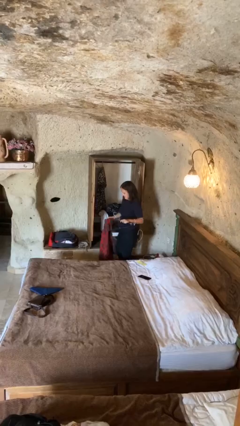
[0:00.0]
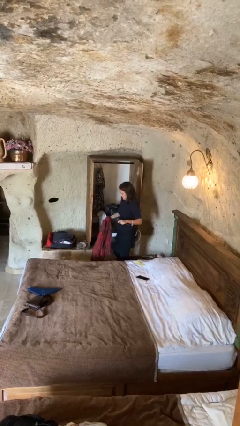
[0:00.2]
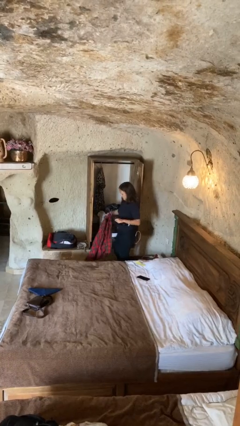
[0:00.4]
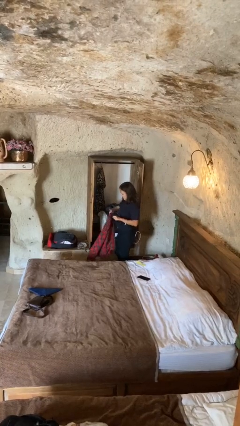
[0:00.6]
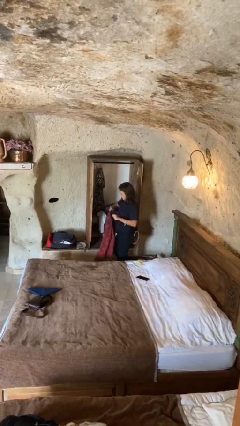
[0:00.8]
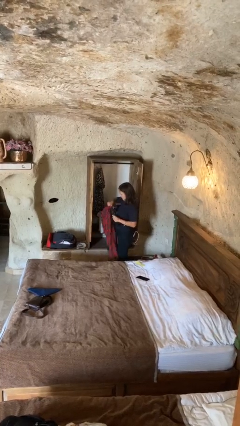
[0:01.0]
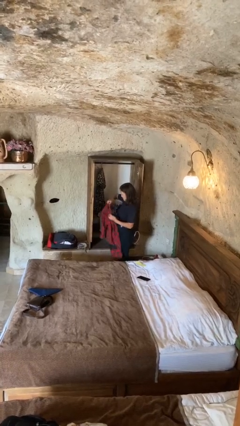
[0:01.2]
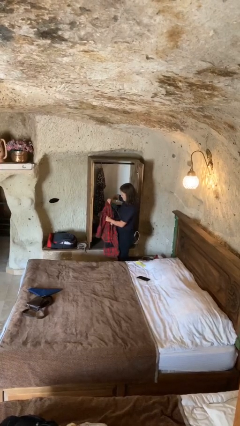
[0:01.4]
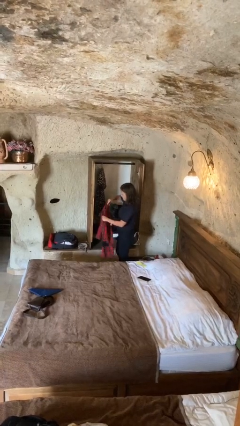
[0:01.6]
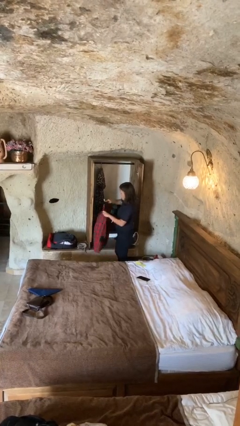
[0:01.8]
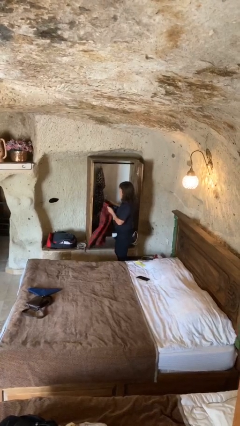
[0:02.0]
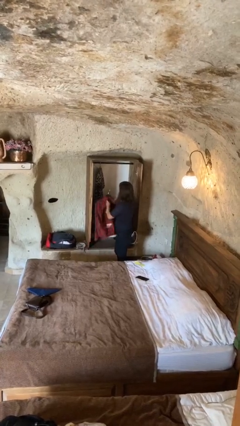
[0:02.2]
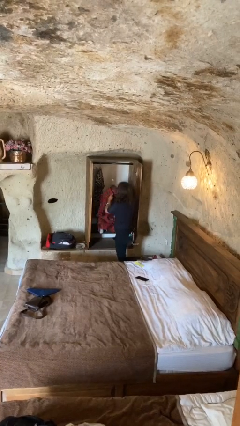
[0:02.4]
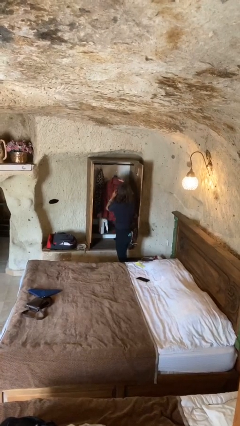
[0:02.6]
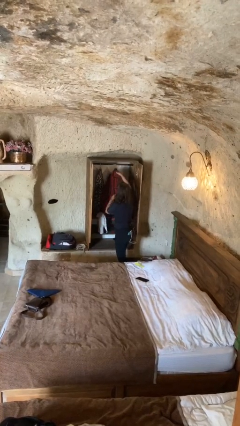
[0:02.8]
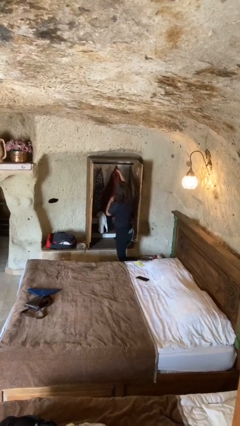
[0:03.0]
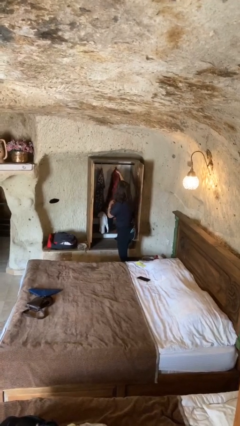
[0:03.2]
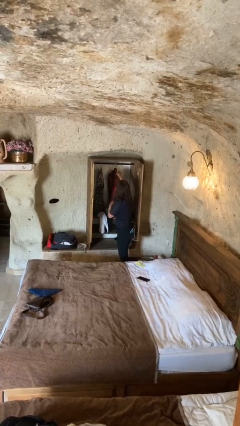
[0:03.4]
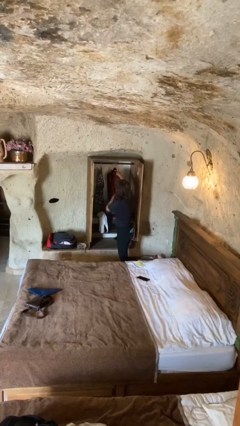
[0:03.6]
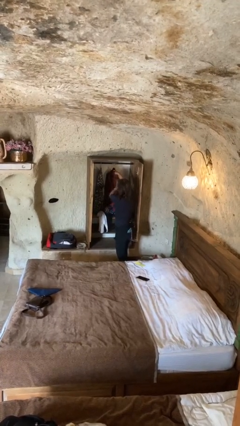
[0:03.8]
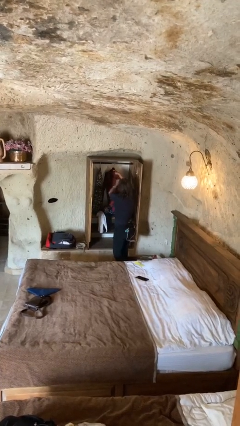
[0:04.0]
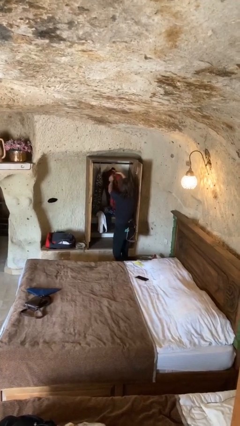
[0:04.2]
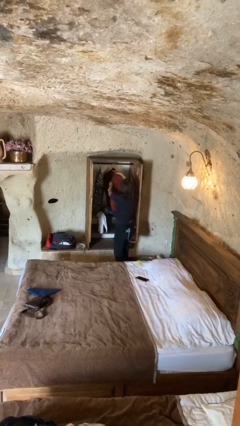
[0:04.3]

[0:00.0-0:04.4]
person puts clothes into closet

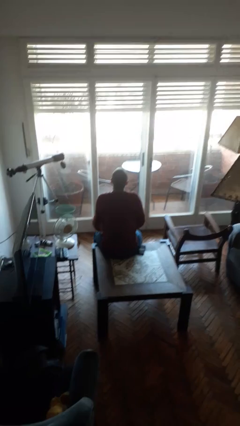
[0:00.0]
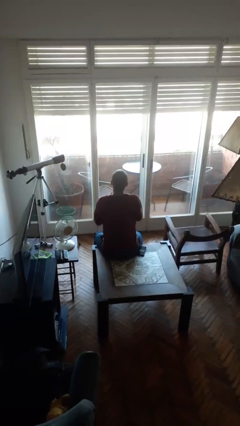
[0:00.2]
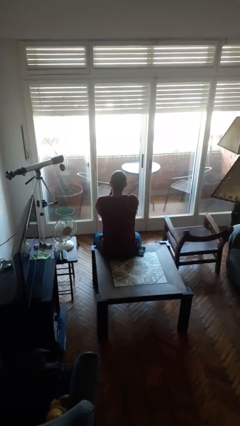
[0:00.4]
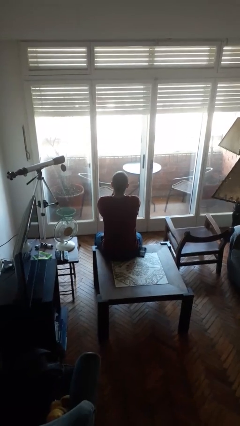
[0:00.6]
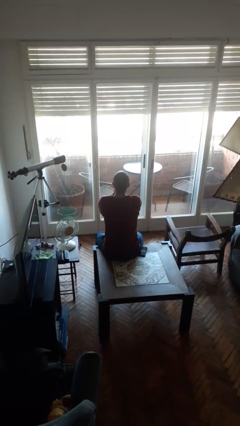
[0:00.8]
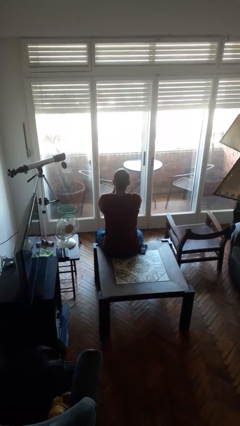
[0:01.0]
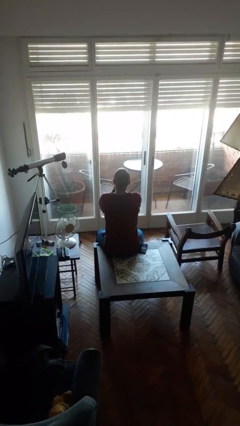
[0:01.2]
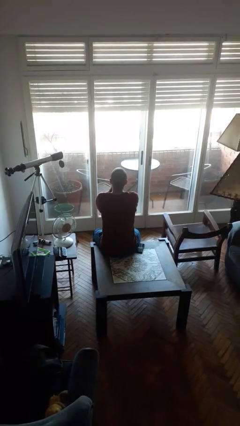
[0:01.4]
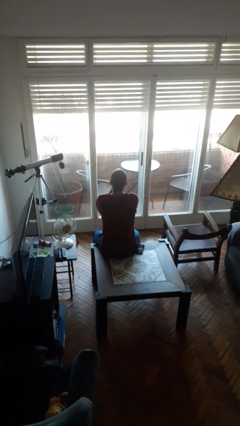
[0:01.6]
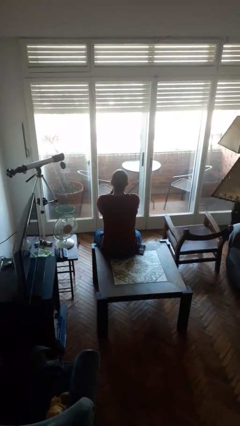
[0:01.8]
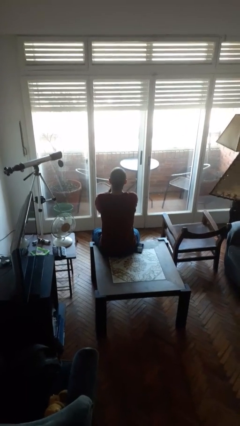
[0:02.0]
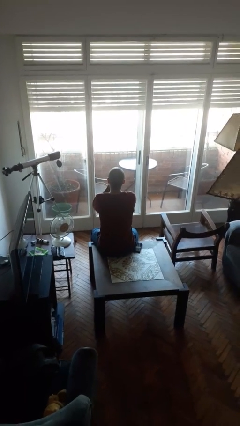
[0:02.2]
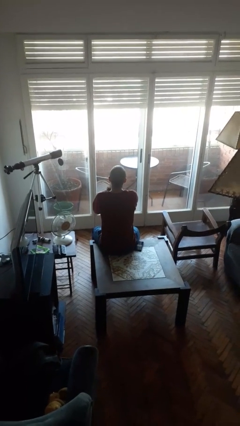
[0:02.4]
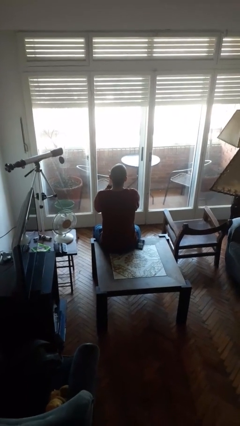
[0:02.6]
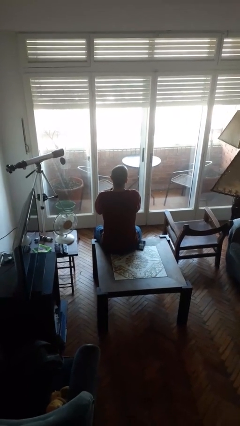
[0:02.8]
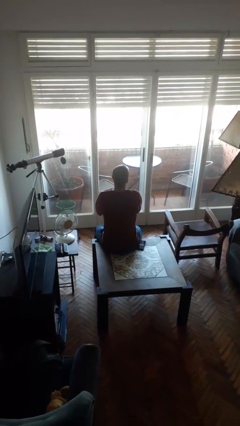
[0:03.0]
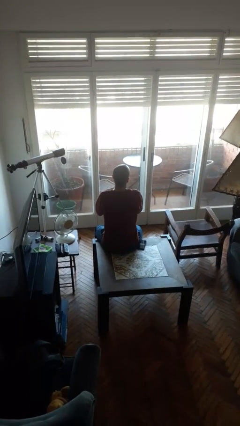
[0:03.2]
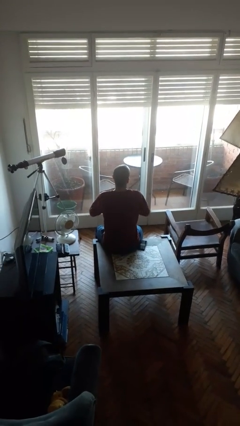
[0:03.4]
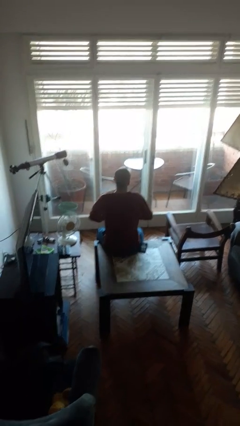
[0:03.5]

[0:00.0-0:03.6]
person blows into hands

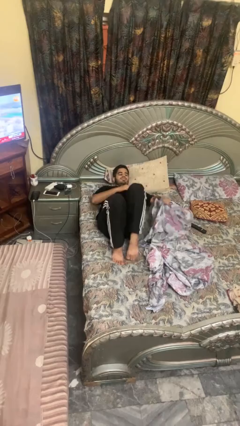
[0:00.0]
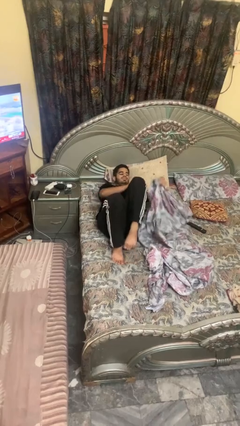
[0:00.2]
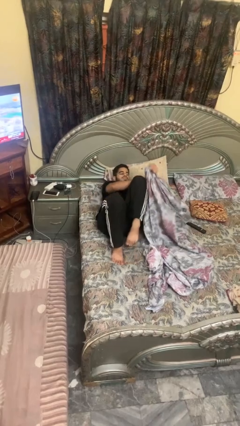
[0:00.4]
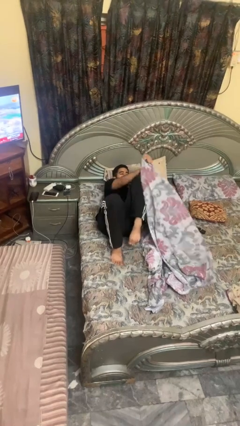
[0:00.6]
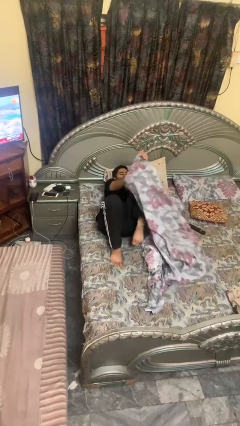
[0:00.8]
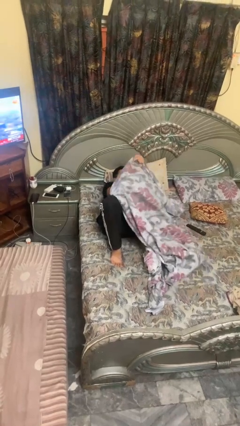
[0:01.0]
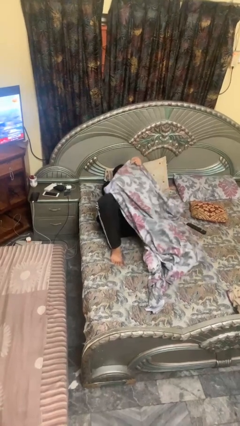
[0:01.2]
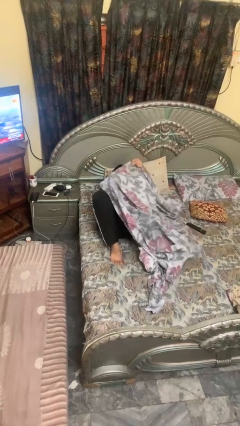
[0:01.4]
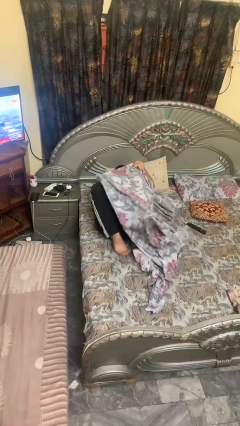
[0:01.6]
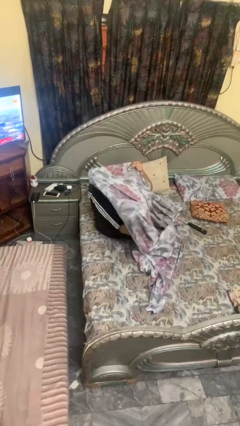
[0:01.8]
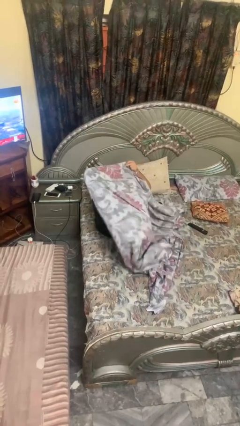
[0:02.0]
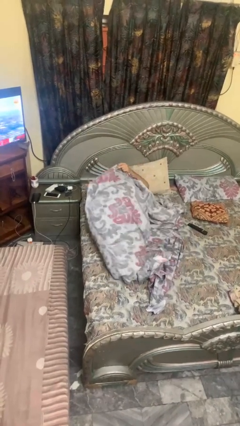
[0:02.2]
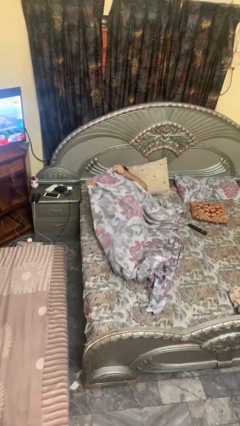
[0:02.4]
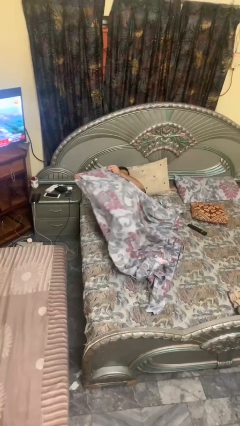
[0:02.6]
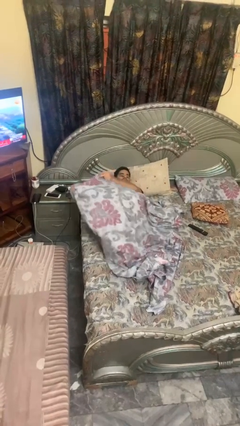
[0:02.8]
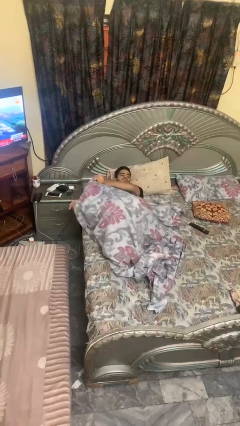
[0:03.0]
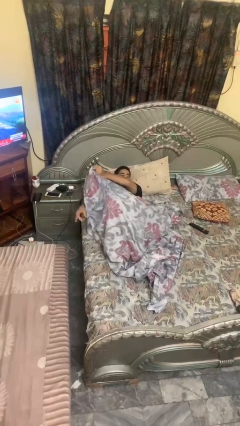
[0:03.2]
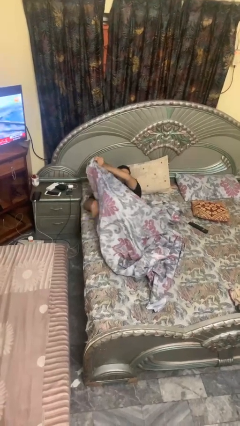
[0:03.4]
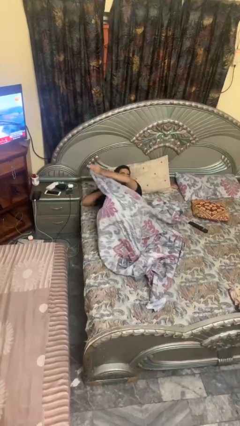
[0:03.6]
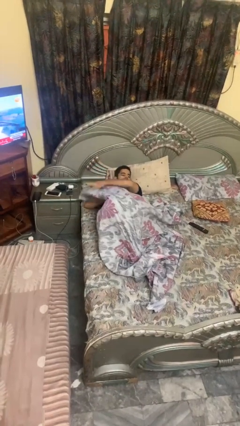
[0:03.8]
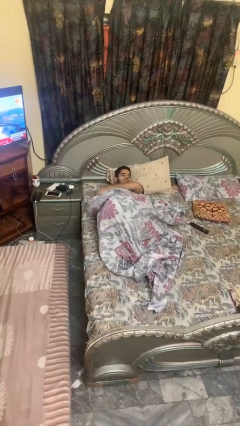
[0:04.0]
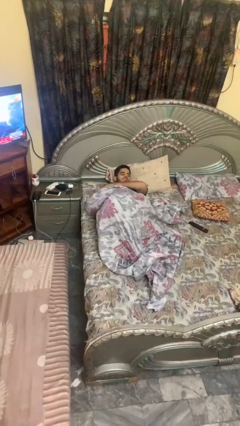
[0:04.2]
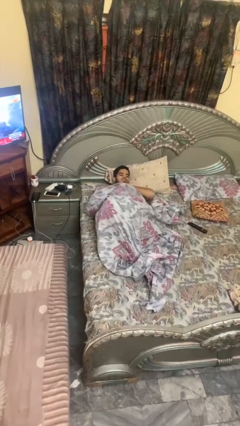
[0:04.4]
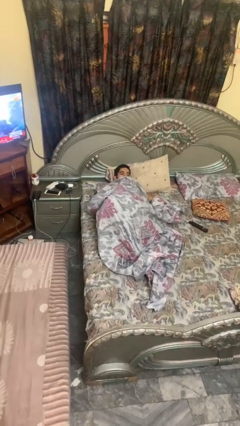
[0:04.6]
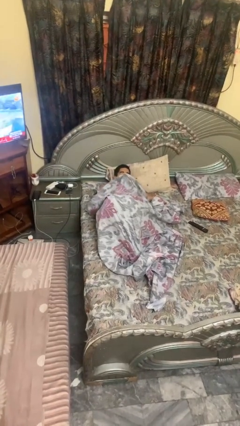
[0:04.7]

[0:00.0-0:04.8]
person covers with bedsheets

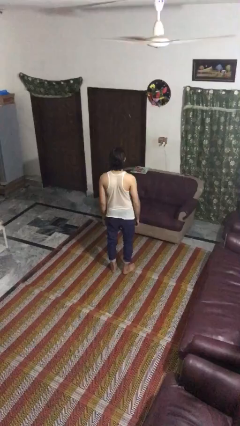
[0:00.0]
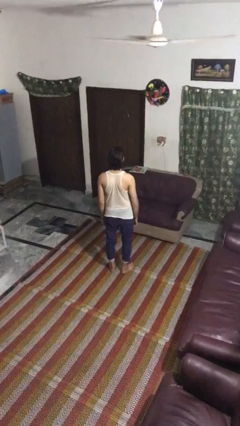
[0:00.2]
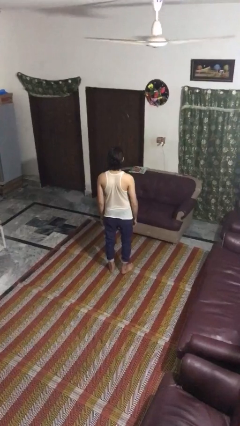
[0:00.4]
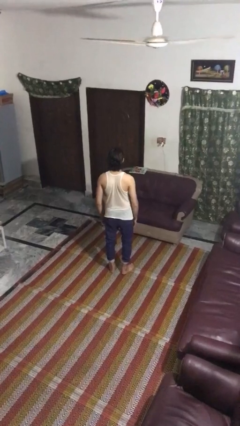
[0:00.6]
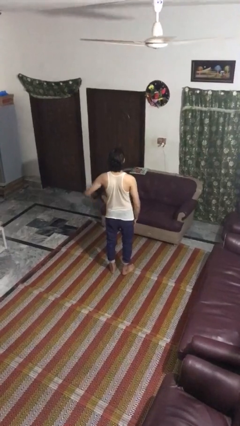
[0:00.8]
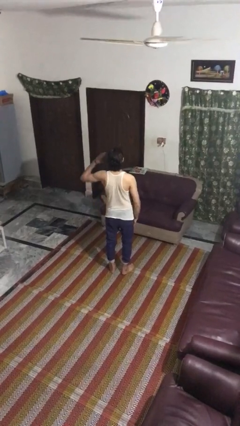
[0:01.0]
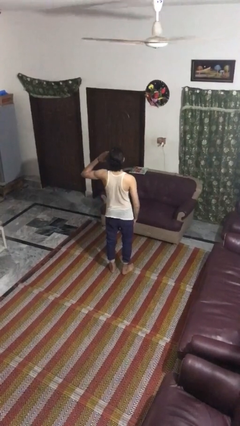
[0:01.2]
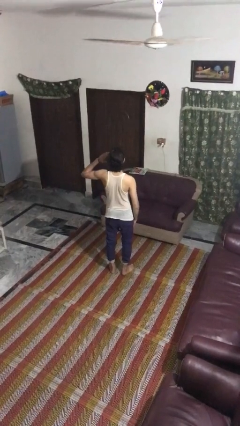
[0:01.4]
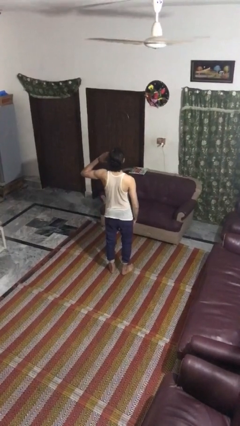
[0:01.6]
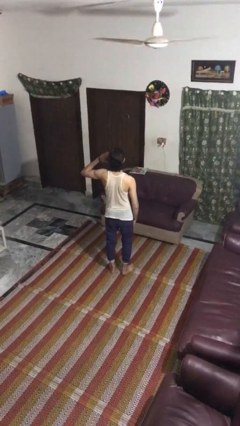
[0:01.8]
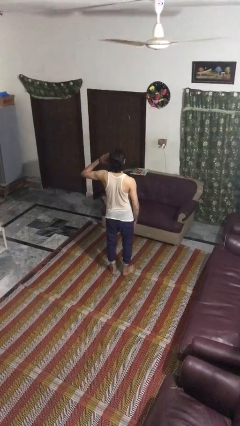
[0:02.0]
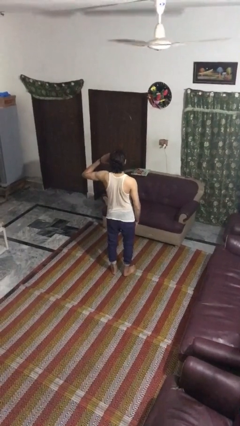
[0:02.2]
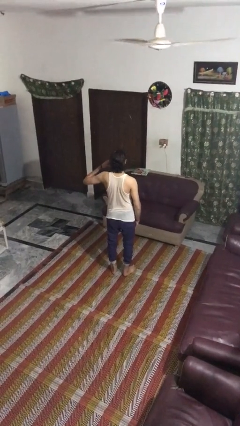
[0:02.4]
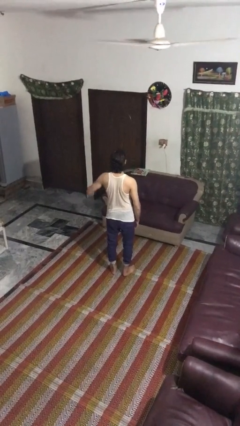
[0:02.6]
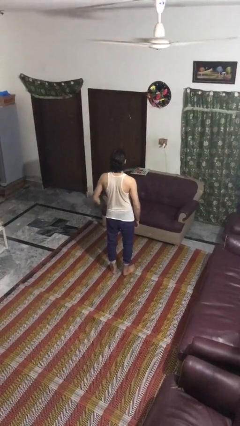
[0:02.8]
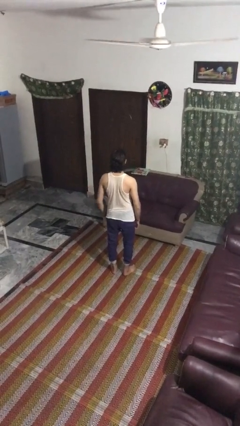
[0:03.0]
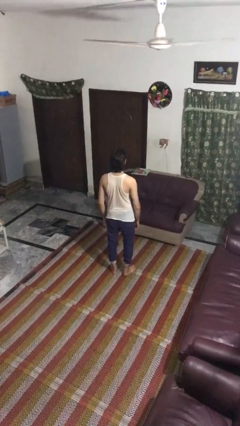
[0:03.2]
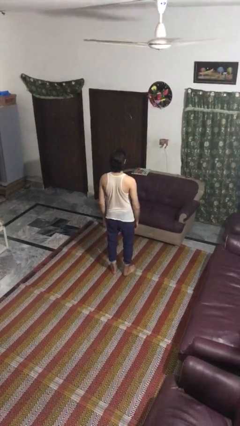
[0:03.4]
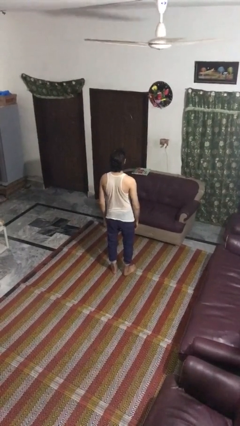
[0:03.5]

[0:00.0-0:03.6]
person salutes

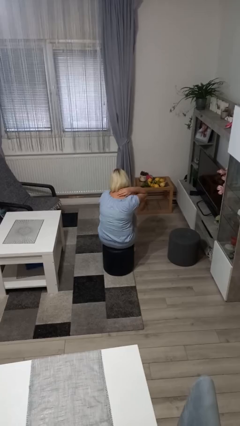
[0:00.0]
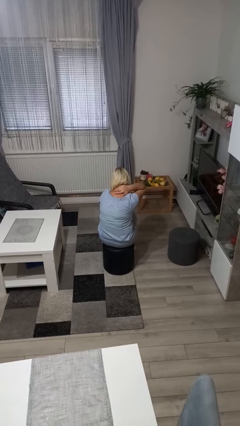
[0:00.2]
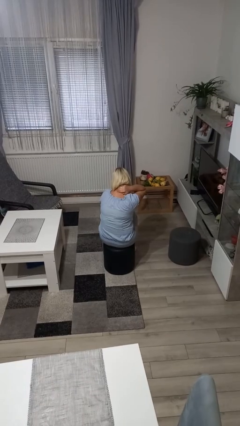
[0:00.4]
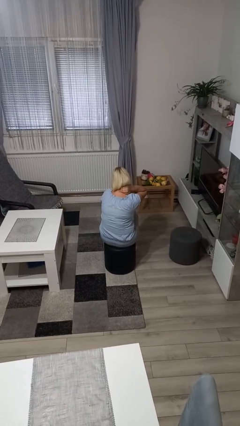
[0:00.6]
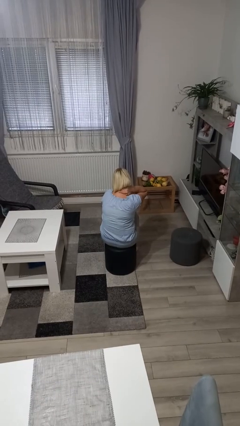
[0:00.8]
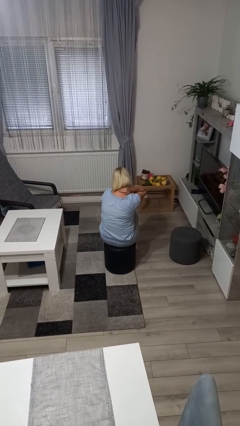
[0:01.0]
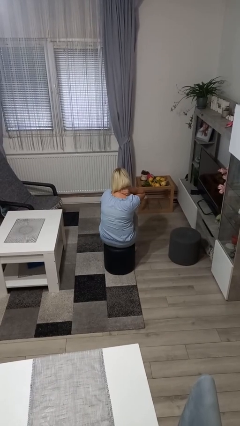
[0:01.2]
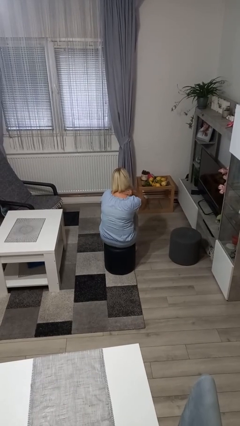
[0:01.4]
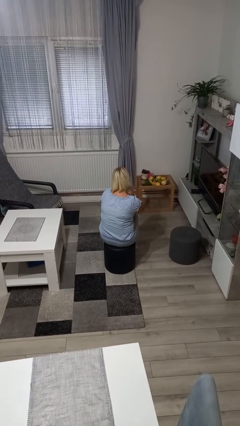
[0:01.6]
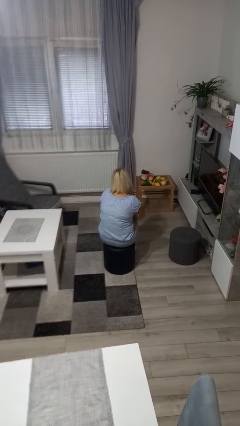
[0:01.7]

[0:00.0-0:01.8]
person rubs neck
